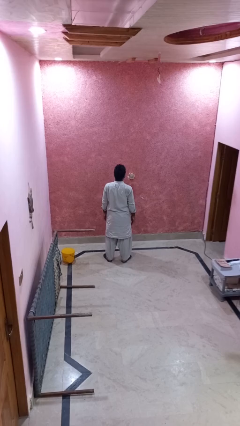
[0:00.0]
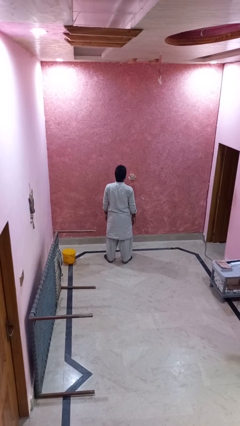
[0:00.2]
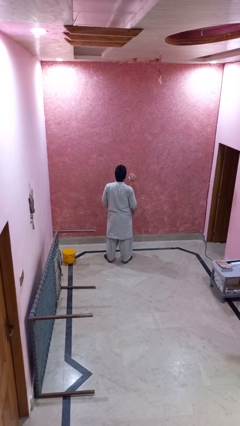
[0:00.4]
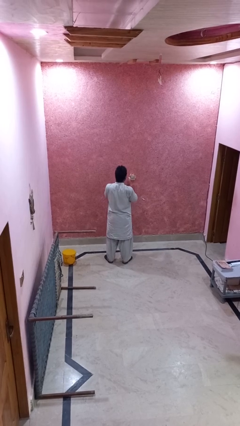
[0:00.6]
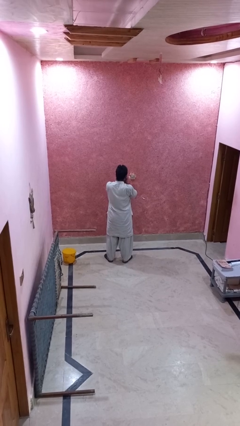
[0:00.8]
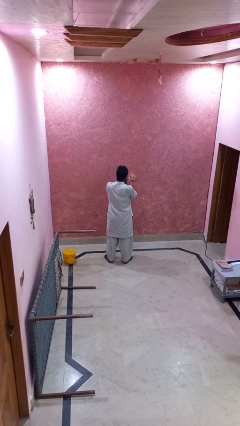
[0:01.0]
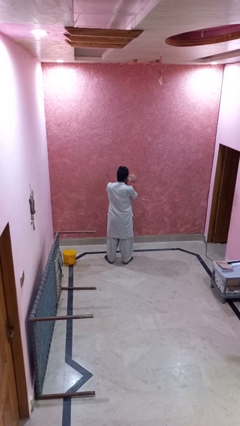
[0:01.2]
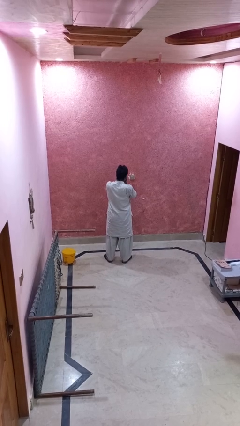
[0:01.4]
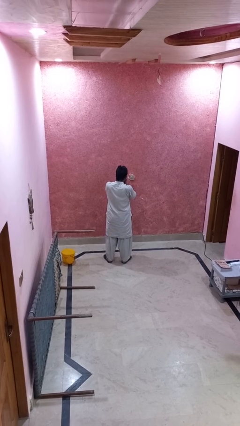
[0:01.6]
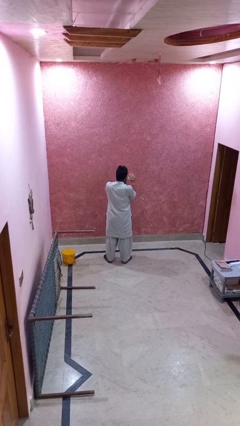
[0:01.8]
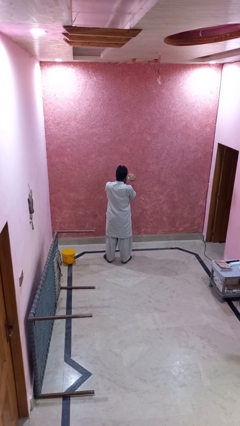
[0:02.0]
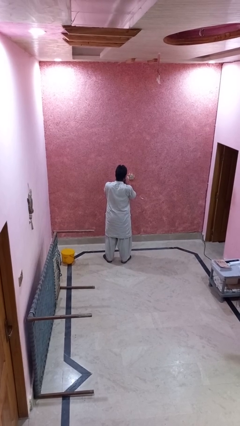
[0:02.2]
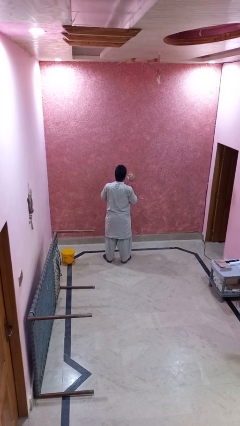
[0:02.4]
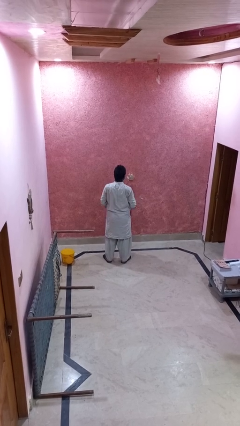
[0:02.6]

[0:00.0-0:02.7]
person sneezes into hand

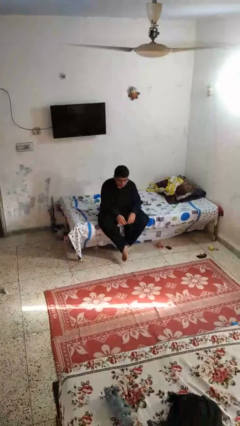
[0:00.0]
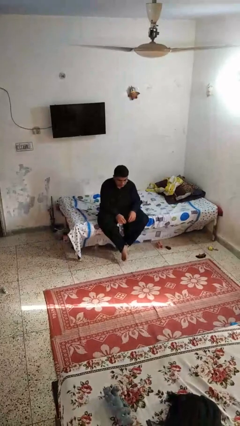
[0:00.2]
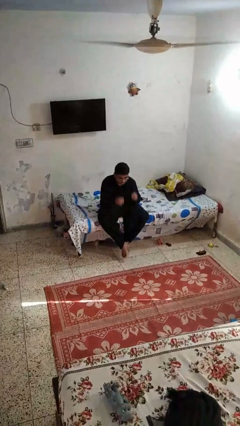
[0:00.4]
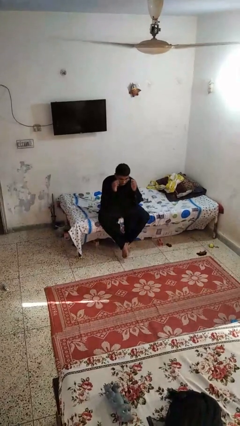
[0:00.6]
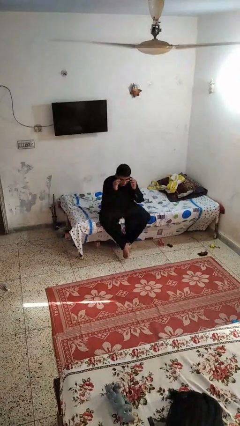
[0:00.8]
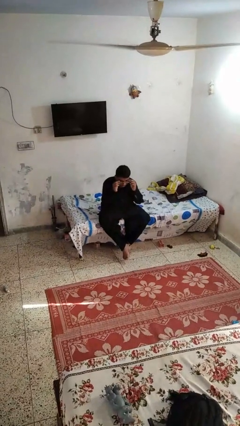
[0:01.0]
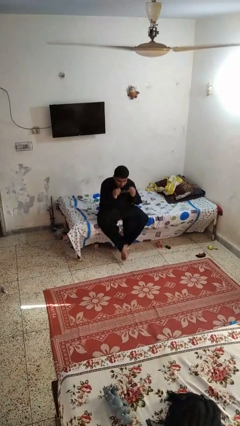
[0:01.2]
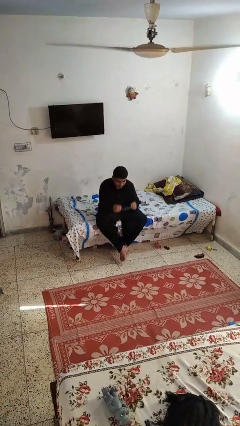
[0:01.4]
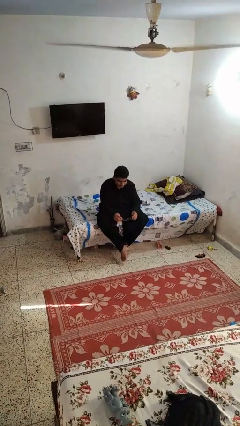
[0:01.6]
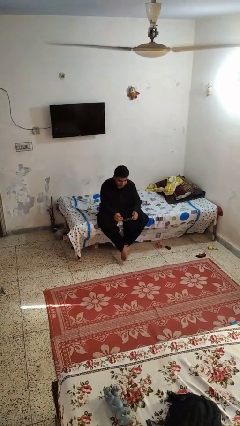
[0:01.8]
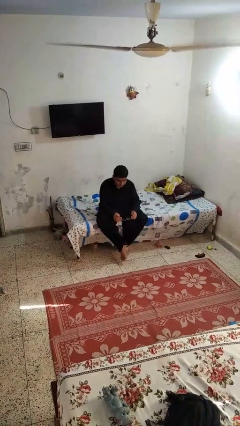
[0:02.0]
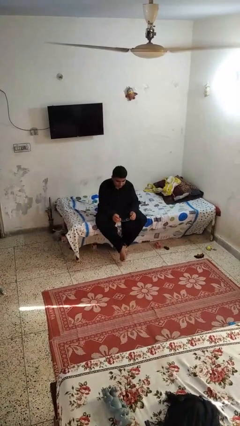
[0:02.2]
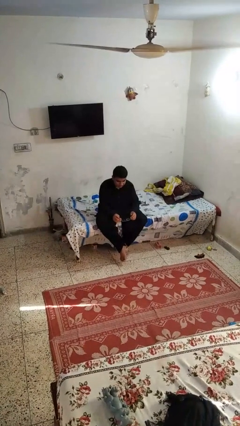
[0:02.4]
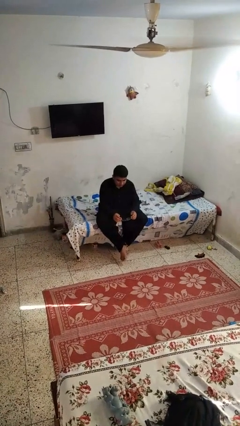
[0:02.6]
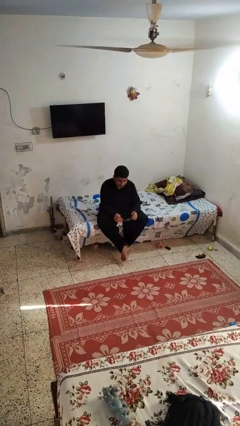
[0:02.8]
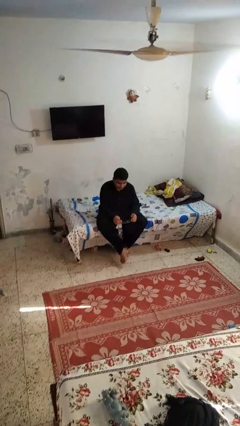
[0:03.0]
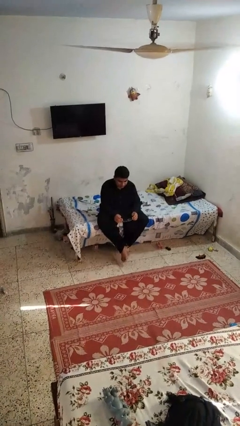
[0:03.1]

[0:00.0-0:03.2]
person takes off glasses

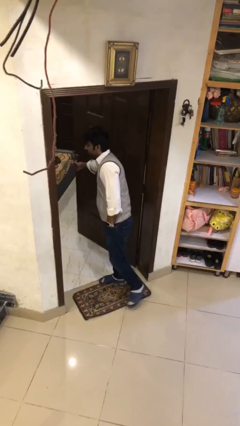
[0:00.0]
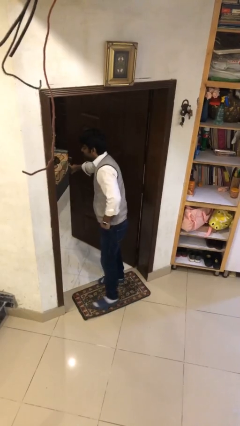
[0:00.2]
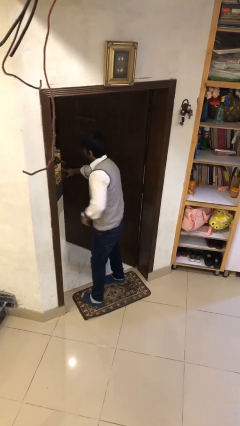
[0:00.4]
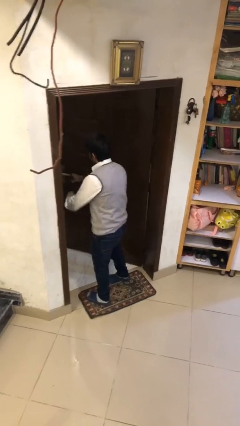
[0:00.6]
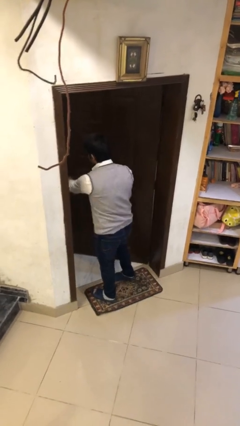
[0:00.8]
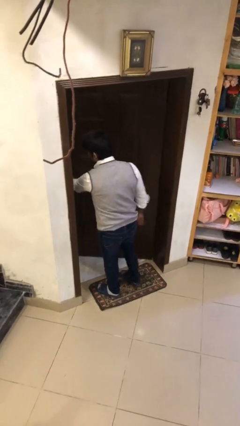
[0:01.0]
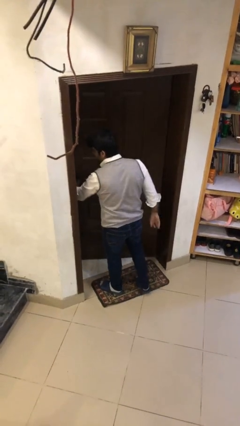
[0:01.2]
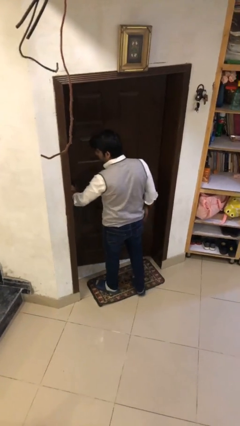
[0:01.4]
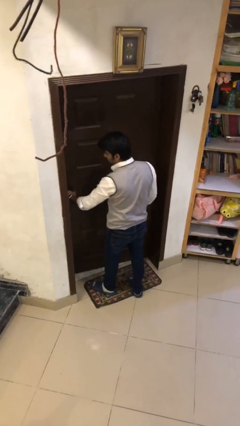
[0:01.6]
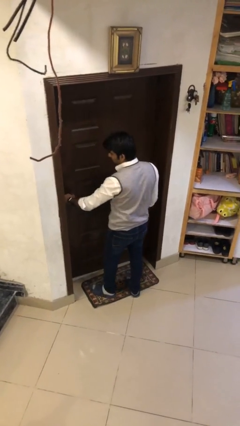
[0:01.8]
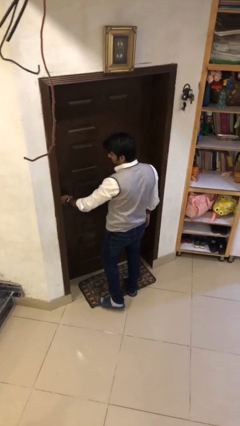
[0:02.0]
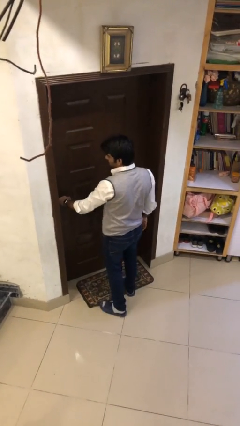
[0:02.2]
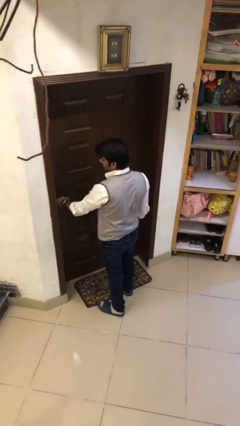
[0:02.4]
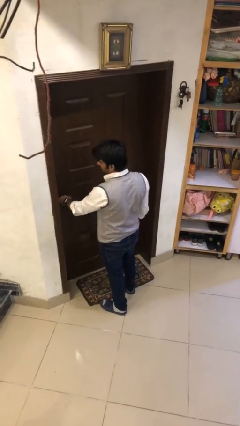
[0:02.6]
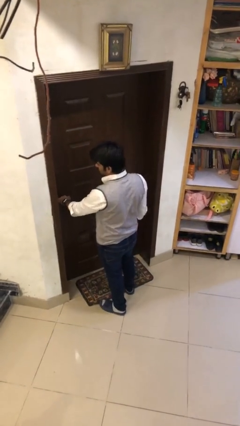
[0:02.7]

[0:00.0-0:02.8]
person closes facility door

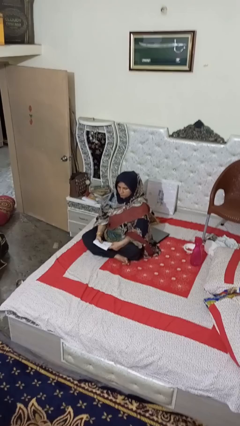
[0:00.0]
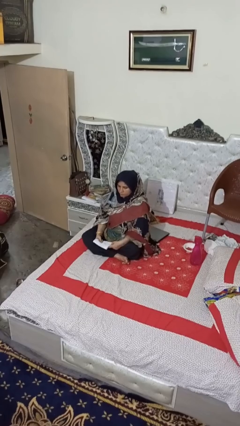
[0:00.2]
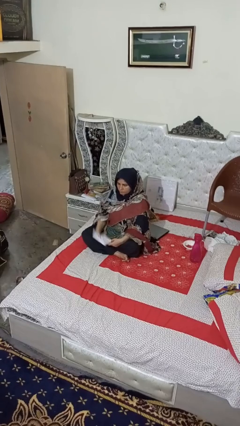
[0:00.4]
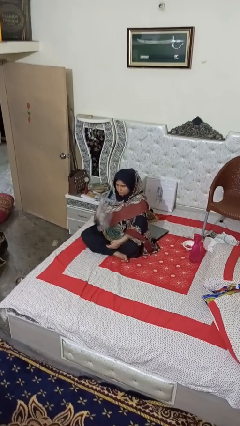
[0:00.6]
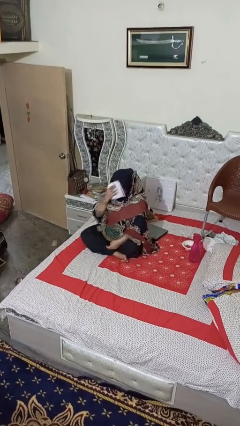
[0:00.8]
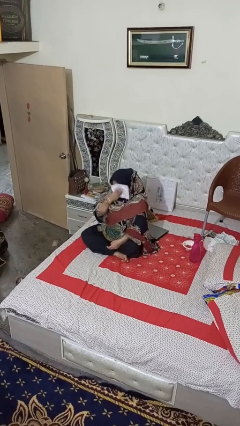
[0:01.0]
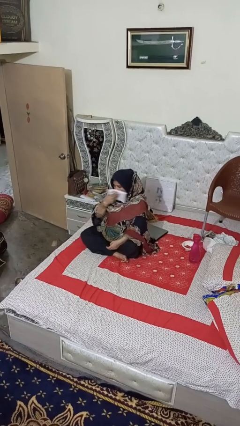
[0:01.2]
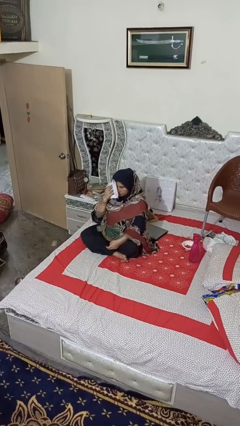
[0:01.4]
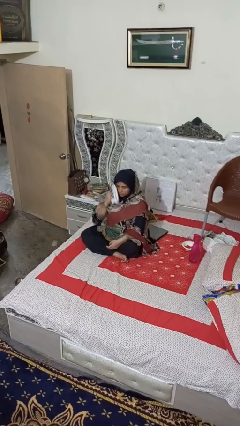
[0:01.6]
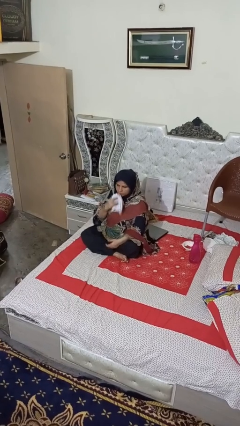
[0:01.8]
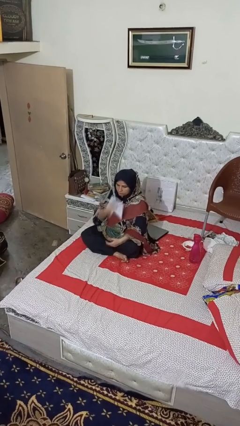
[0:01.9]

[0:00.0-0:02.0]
person wipes mouth with napkin

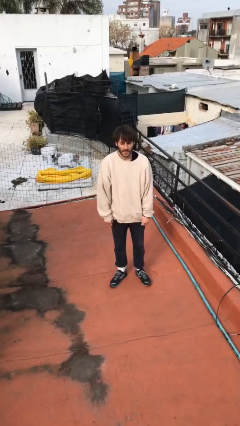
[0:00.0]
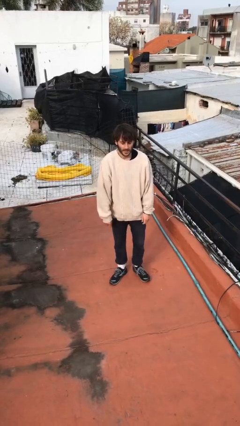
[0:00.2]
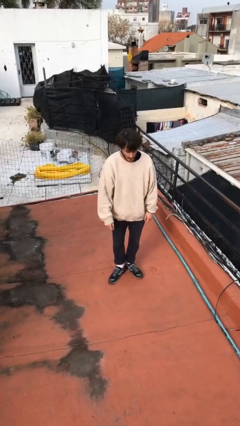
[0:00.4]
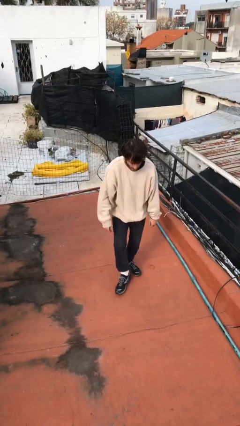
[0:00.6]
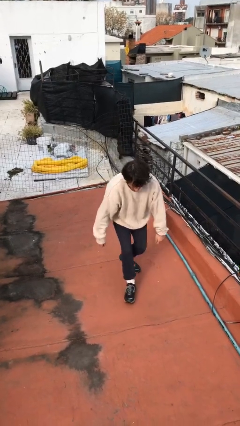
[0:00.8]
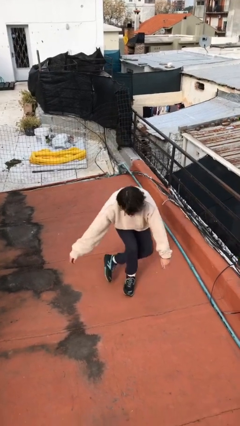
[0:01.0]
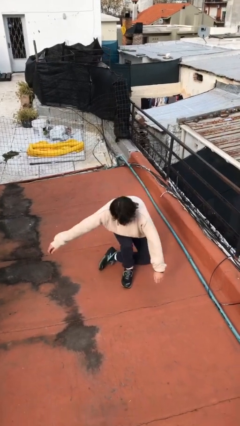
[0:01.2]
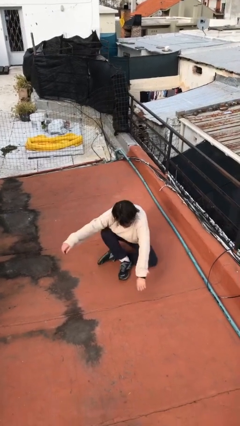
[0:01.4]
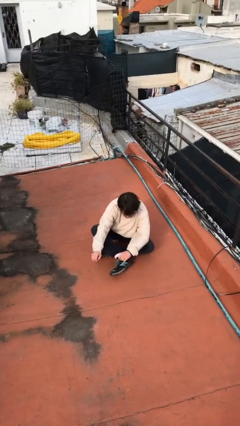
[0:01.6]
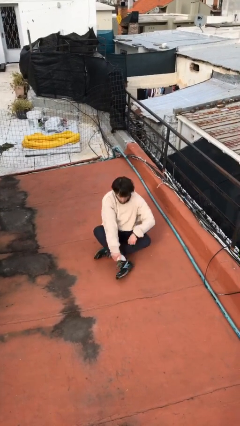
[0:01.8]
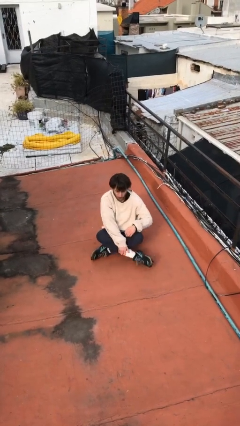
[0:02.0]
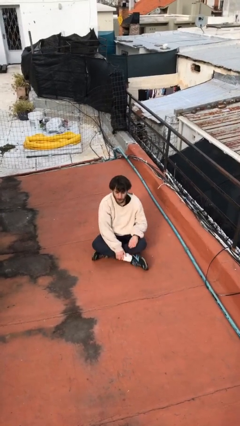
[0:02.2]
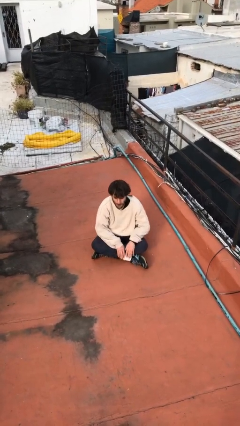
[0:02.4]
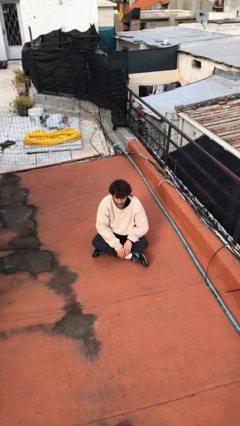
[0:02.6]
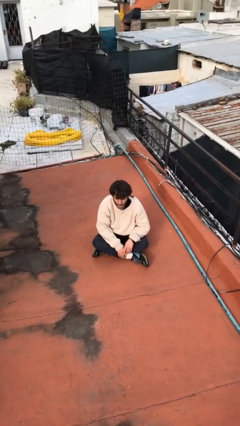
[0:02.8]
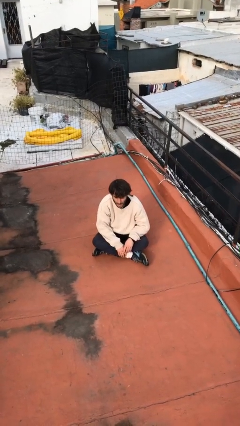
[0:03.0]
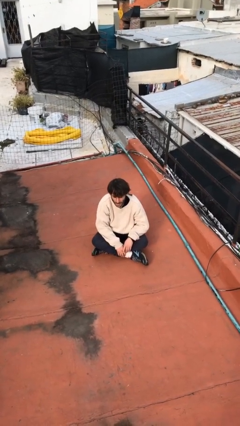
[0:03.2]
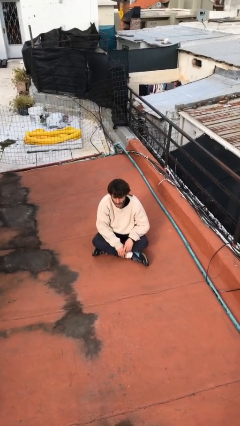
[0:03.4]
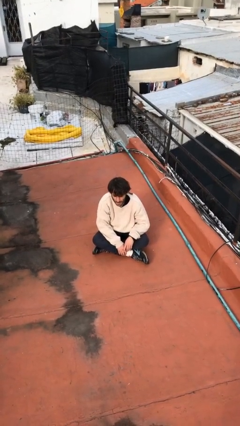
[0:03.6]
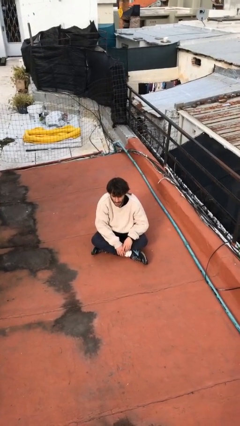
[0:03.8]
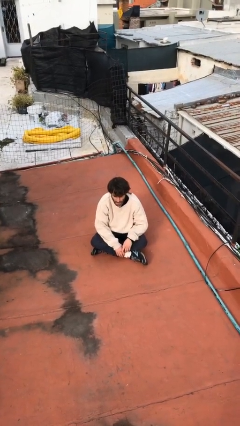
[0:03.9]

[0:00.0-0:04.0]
person sits crisscross

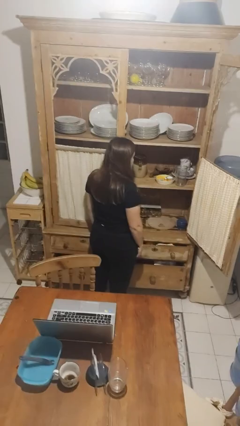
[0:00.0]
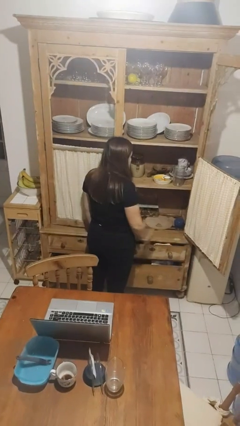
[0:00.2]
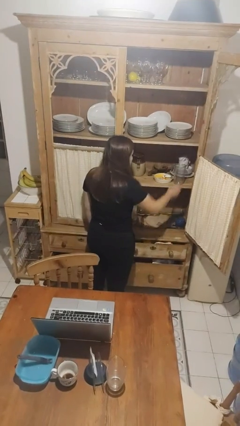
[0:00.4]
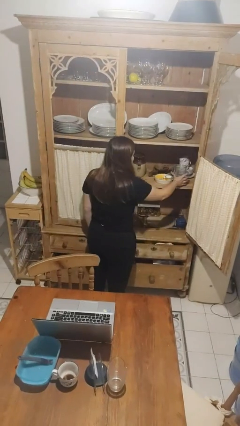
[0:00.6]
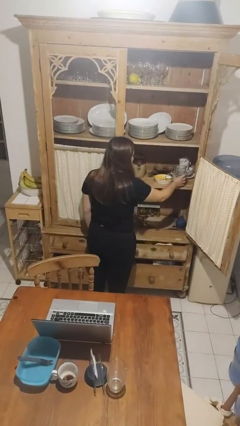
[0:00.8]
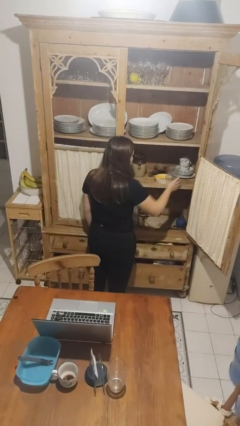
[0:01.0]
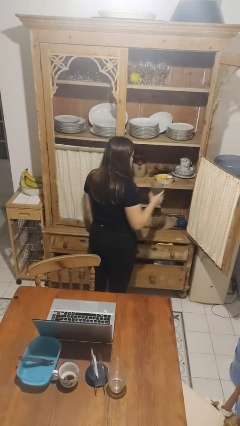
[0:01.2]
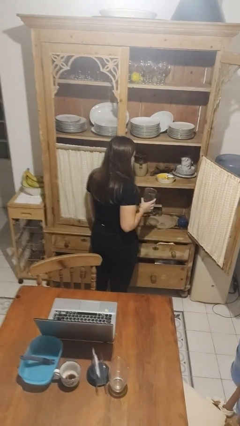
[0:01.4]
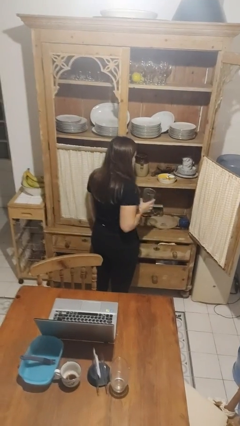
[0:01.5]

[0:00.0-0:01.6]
person takes object from cabinet

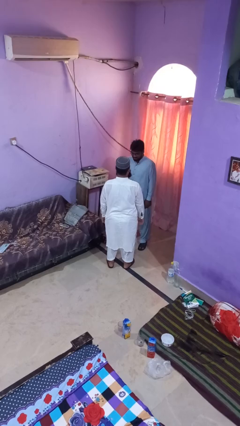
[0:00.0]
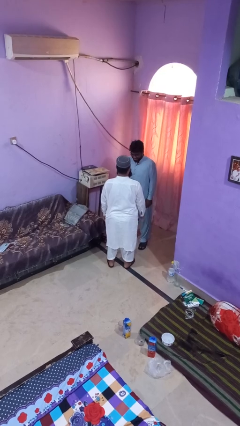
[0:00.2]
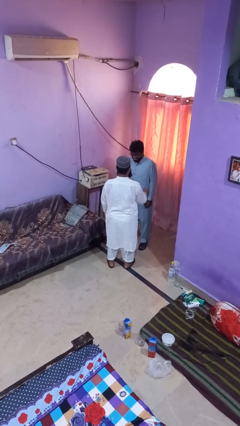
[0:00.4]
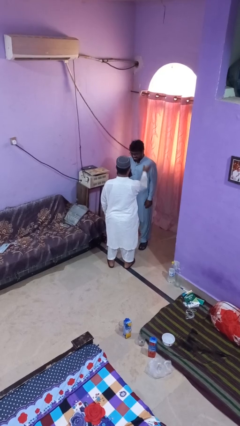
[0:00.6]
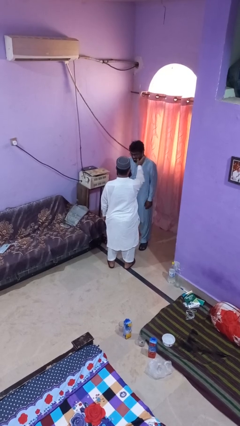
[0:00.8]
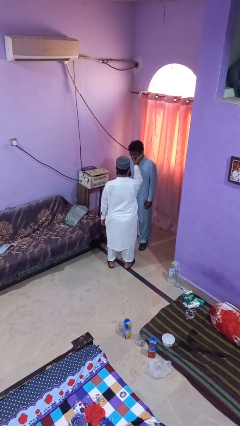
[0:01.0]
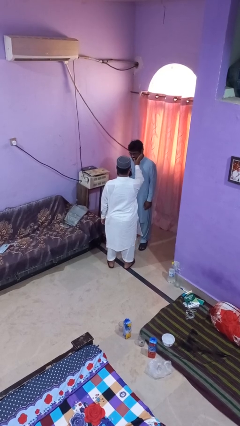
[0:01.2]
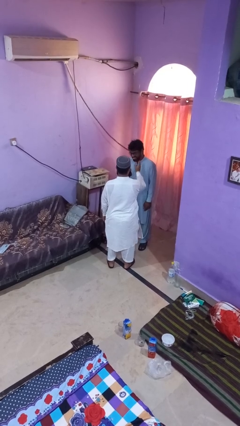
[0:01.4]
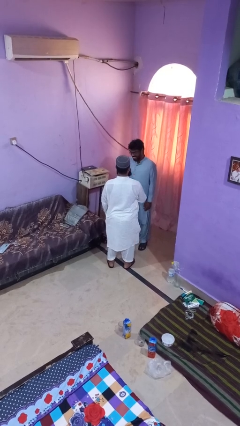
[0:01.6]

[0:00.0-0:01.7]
person touches face of person
